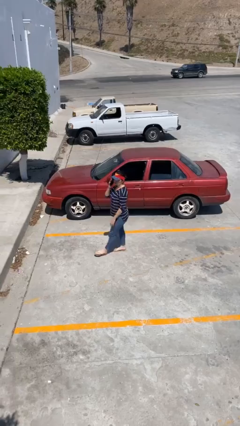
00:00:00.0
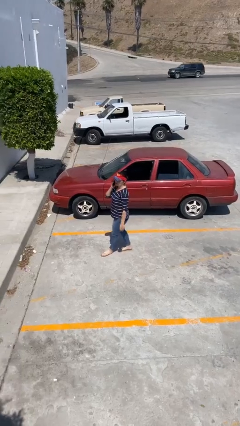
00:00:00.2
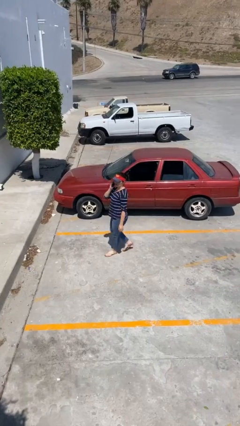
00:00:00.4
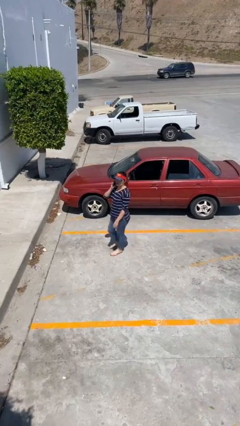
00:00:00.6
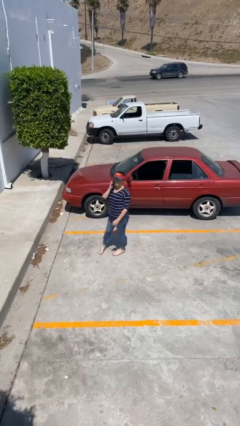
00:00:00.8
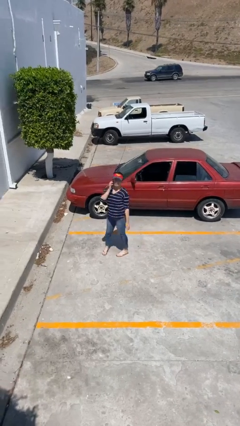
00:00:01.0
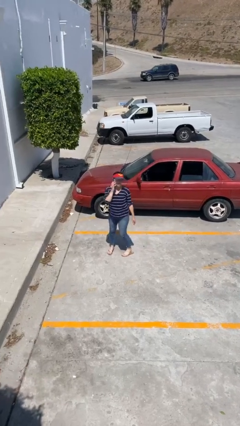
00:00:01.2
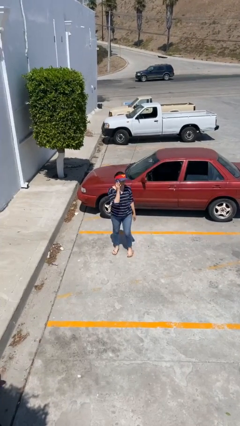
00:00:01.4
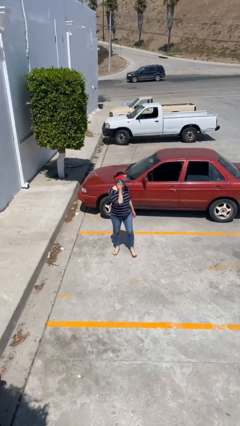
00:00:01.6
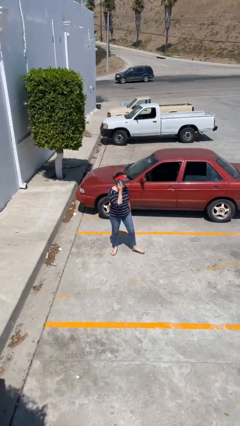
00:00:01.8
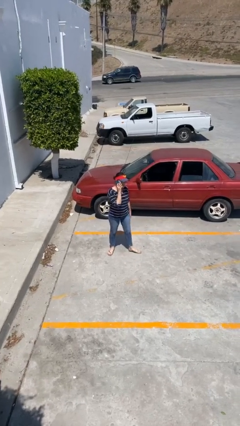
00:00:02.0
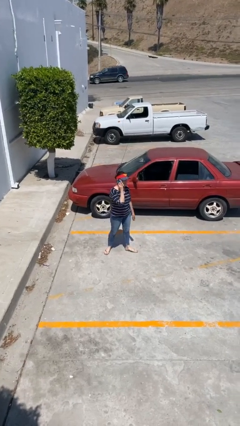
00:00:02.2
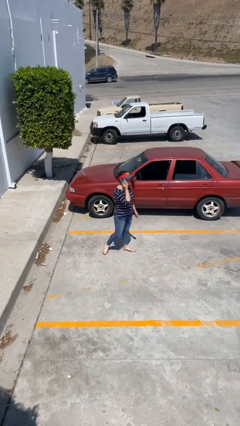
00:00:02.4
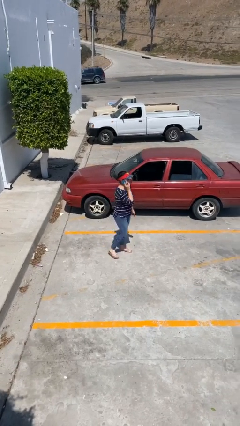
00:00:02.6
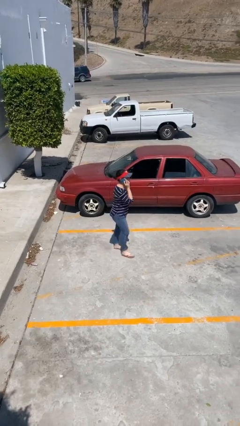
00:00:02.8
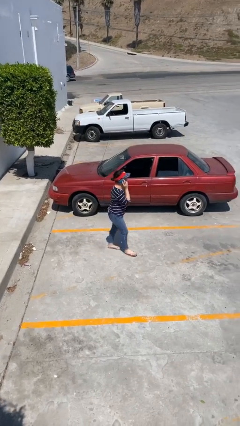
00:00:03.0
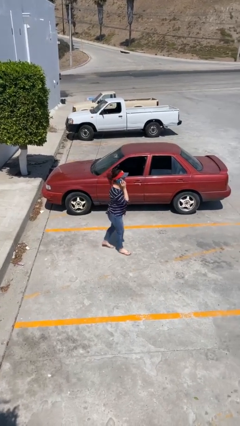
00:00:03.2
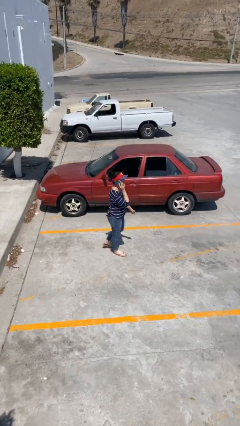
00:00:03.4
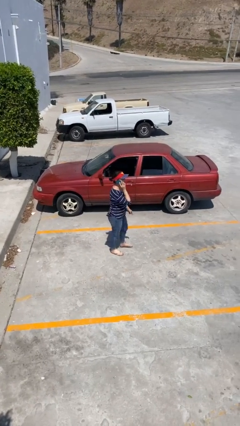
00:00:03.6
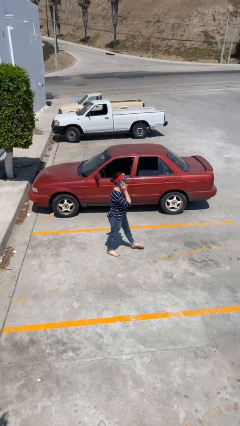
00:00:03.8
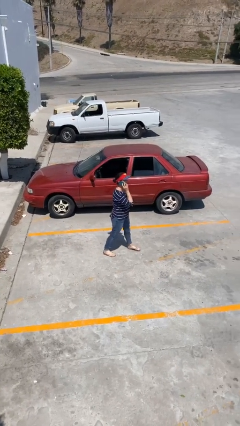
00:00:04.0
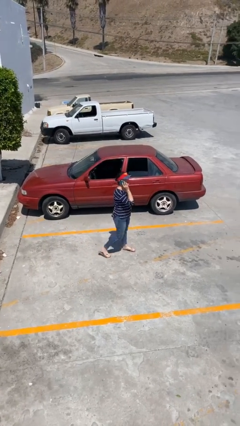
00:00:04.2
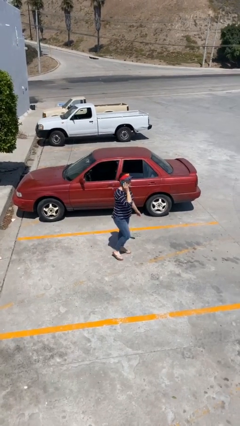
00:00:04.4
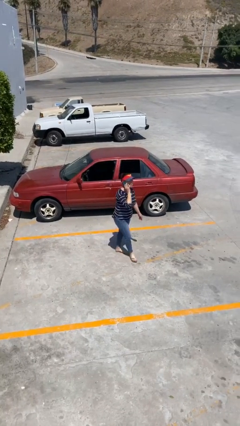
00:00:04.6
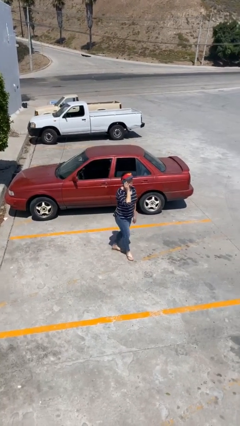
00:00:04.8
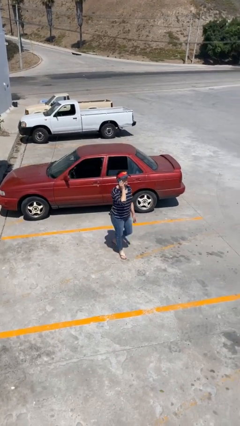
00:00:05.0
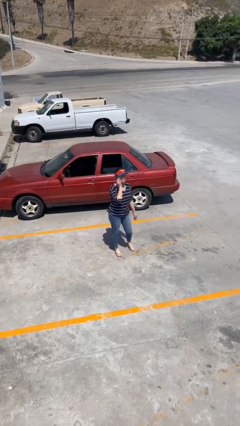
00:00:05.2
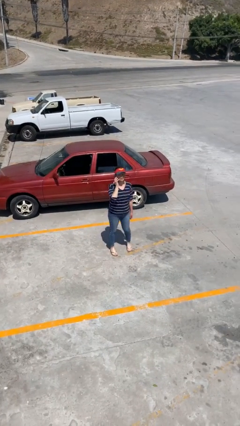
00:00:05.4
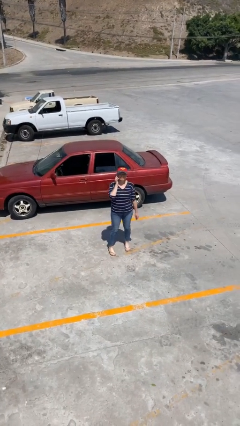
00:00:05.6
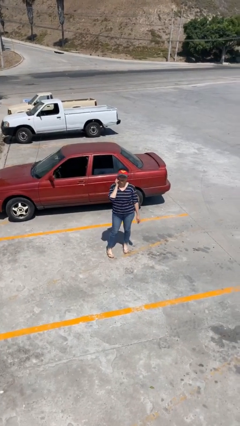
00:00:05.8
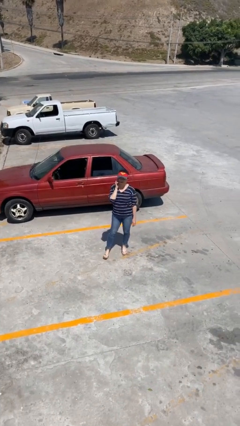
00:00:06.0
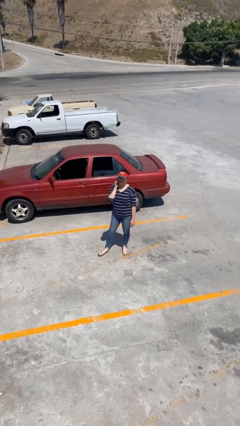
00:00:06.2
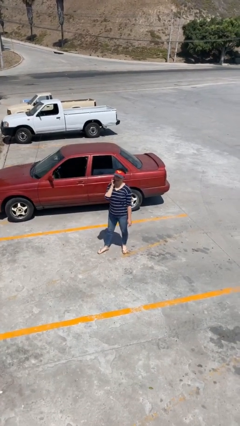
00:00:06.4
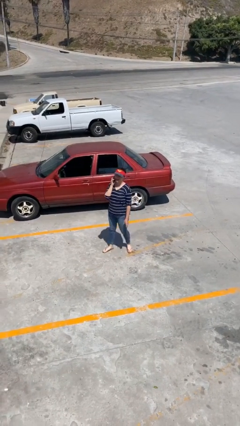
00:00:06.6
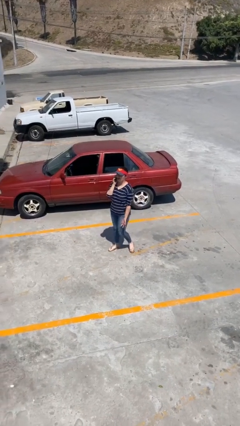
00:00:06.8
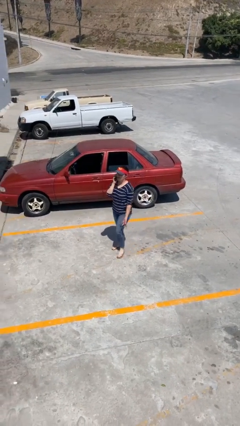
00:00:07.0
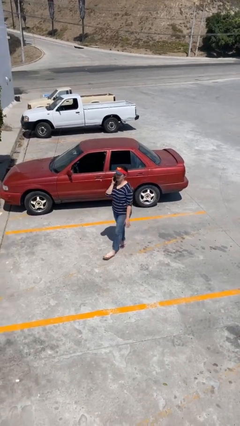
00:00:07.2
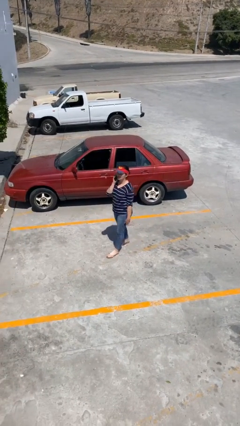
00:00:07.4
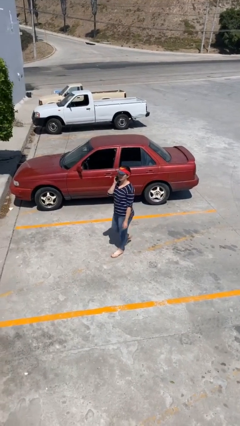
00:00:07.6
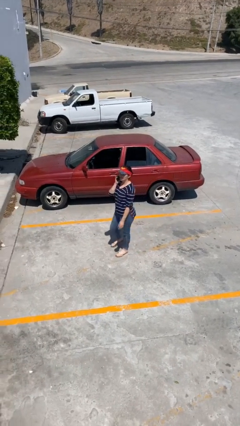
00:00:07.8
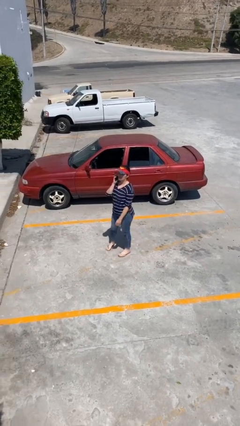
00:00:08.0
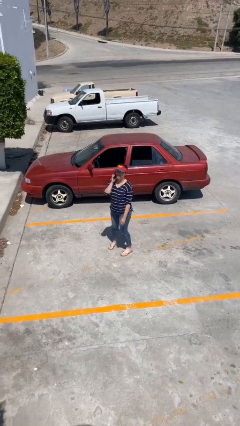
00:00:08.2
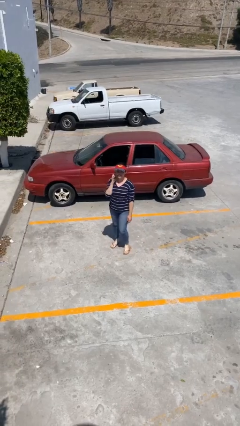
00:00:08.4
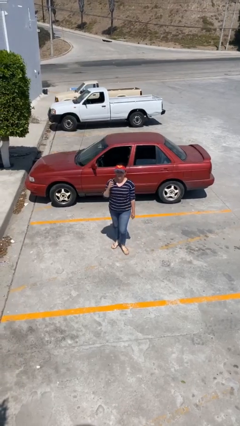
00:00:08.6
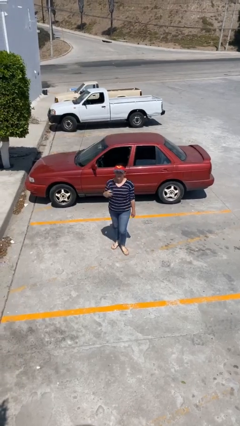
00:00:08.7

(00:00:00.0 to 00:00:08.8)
person talks on phone

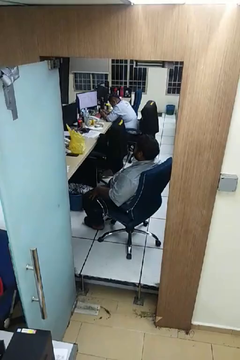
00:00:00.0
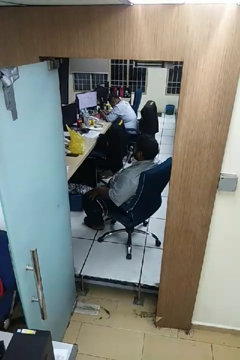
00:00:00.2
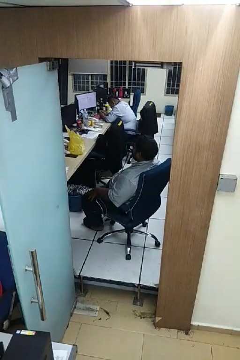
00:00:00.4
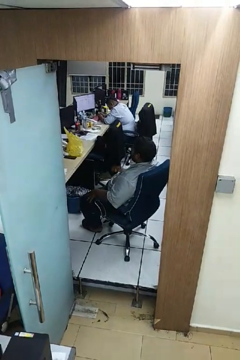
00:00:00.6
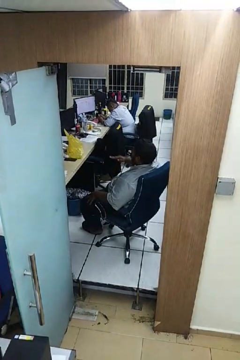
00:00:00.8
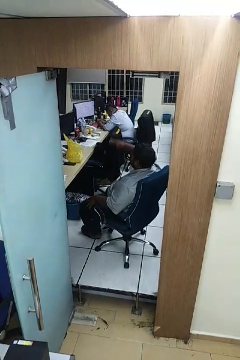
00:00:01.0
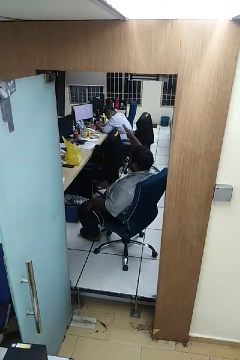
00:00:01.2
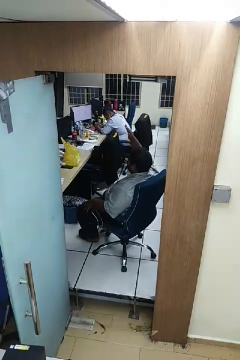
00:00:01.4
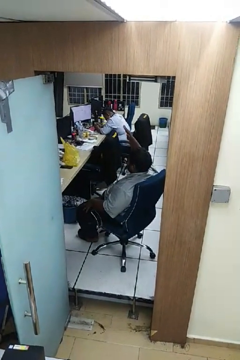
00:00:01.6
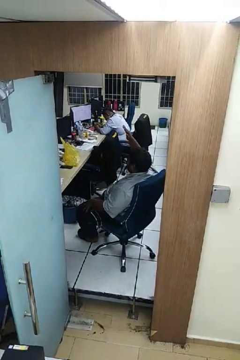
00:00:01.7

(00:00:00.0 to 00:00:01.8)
person gestures swipe up

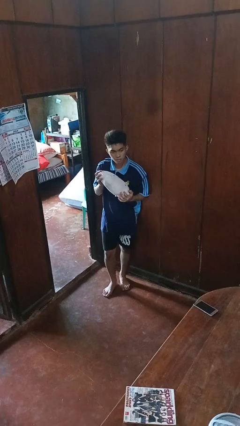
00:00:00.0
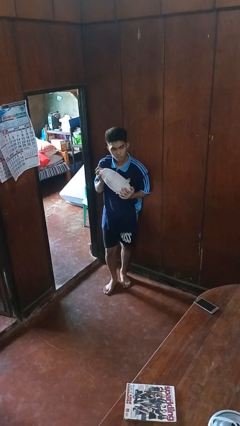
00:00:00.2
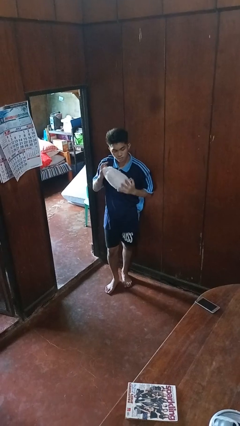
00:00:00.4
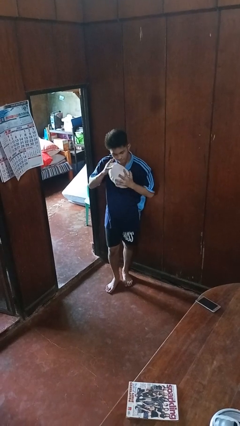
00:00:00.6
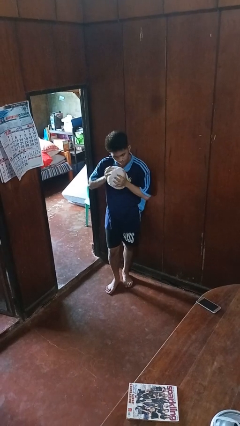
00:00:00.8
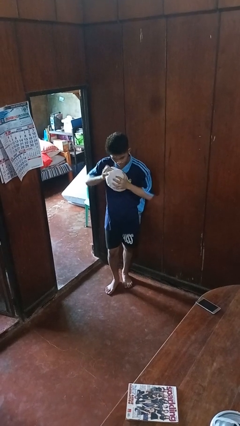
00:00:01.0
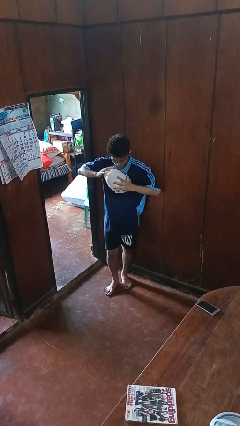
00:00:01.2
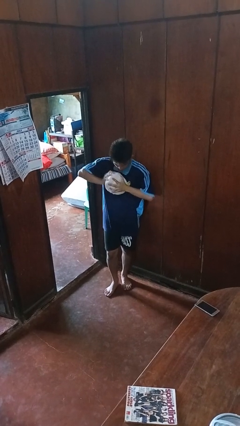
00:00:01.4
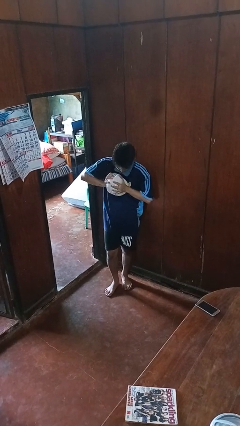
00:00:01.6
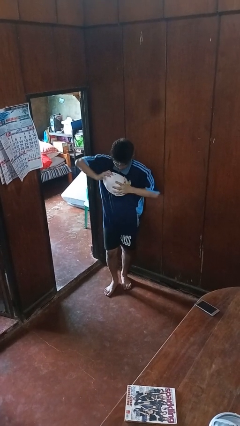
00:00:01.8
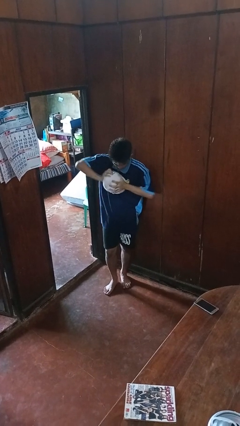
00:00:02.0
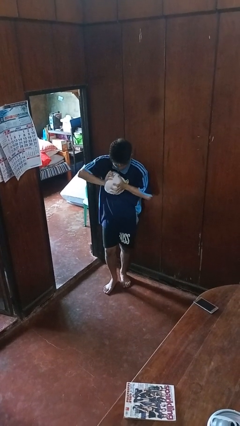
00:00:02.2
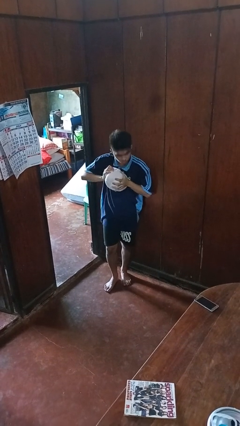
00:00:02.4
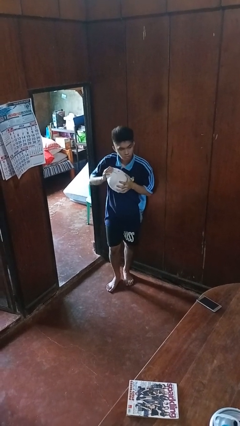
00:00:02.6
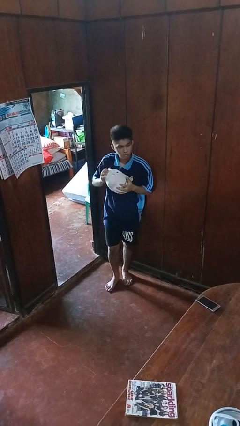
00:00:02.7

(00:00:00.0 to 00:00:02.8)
person squeezes object

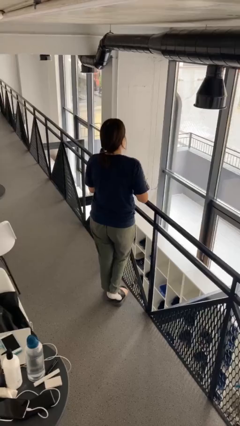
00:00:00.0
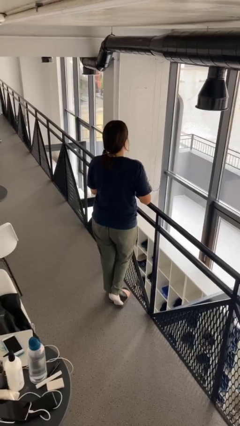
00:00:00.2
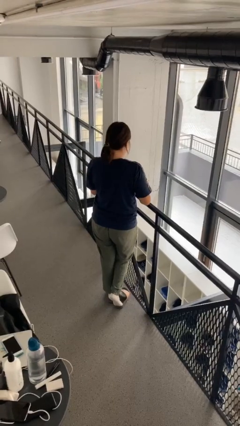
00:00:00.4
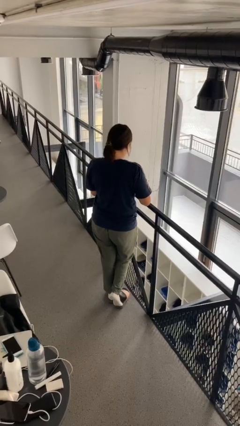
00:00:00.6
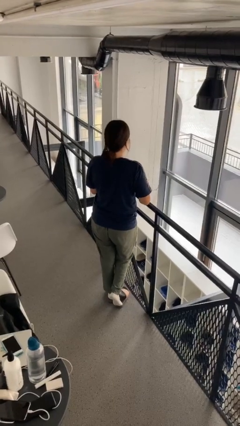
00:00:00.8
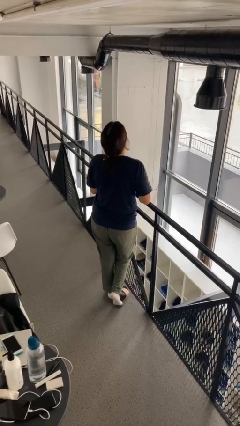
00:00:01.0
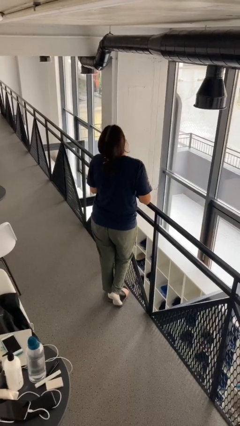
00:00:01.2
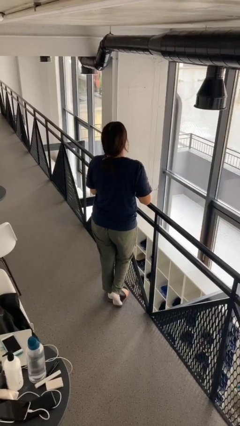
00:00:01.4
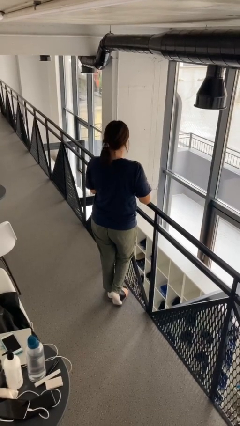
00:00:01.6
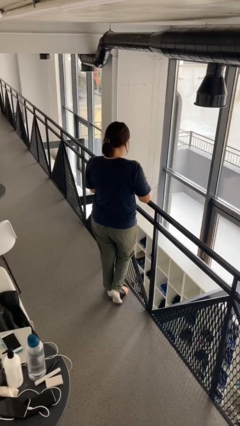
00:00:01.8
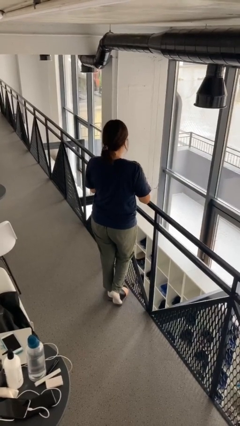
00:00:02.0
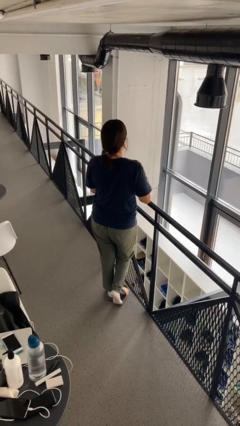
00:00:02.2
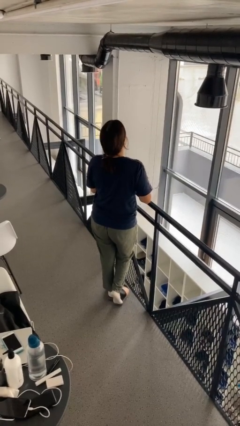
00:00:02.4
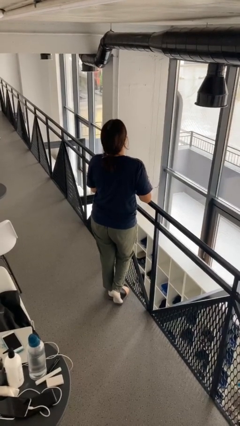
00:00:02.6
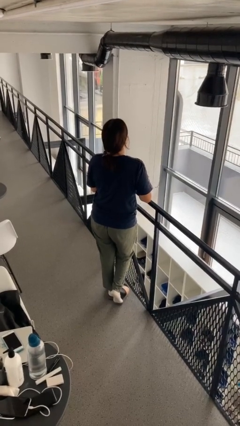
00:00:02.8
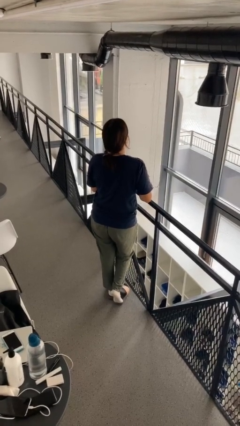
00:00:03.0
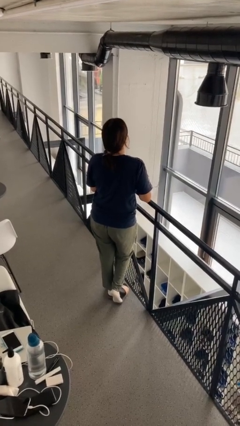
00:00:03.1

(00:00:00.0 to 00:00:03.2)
person nods head

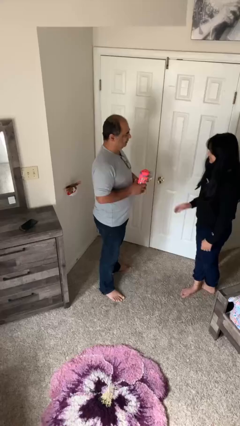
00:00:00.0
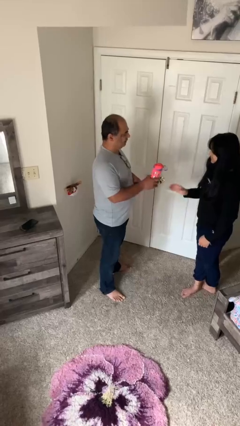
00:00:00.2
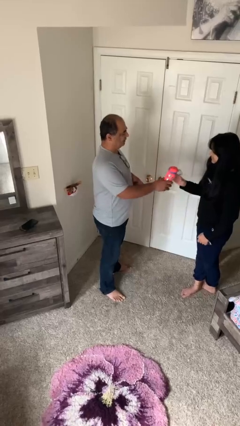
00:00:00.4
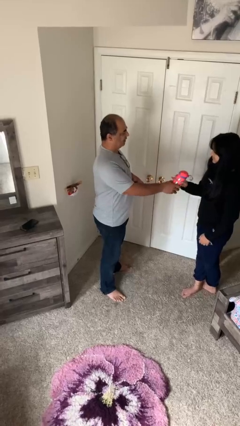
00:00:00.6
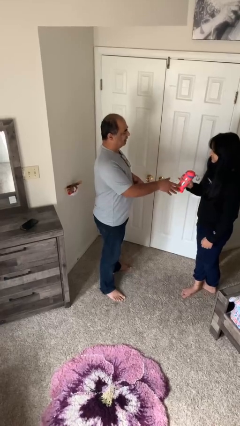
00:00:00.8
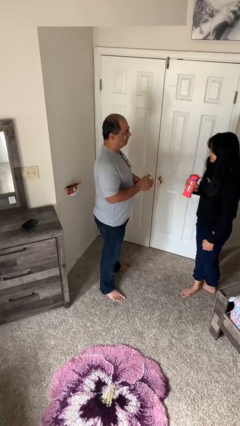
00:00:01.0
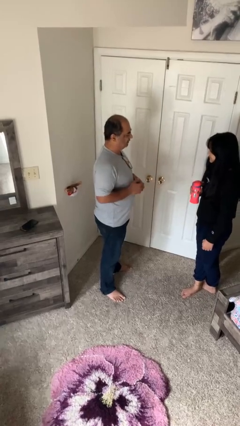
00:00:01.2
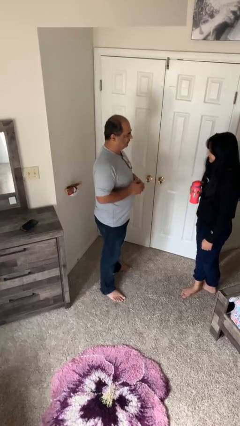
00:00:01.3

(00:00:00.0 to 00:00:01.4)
person transfers object to person
